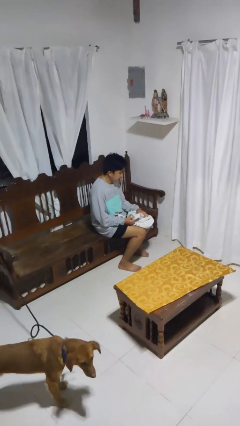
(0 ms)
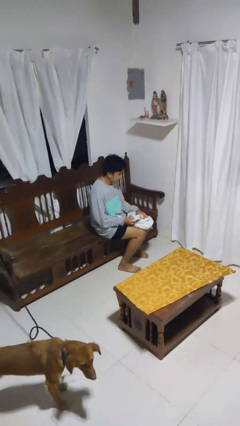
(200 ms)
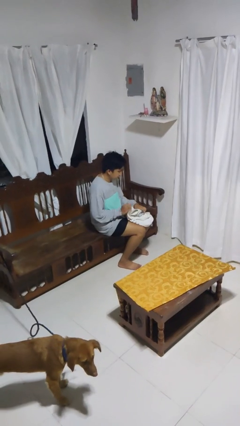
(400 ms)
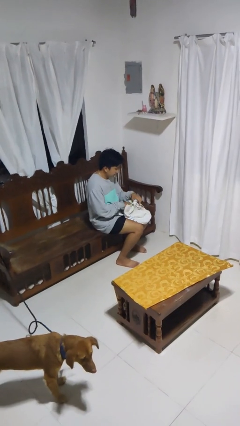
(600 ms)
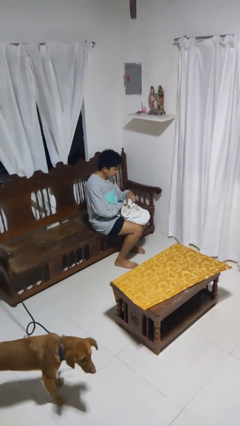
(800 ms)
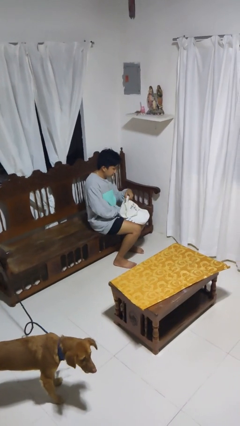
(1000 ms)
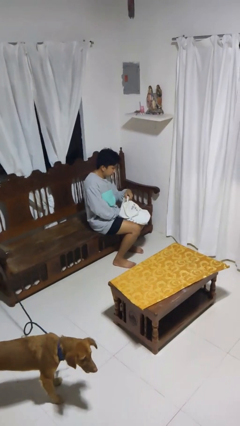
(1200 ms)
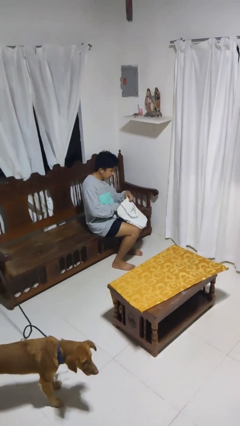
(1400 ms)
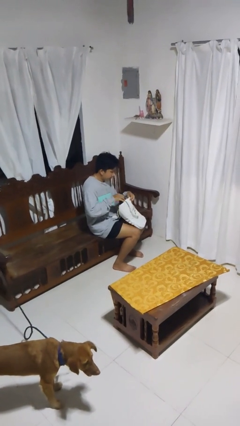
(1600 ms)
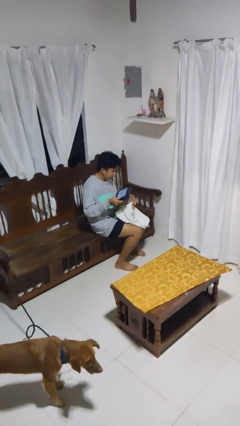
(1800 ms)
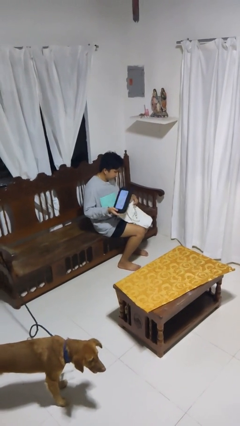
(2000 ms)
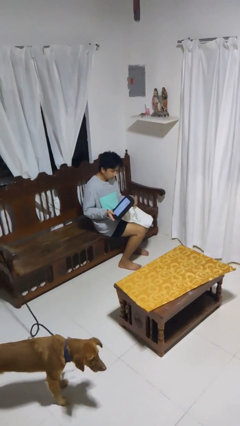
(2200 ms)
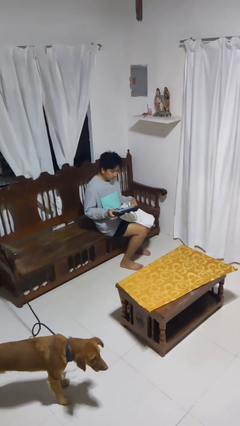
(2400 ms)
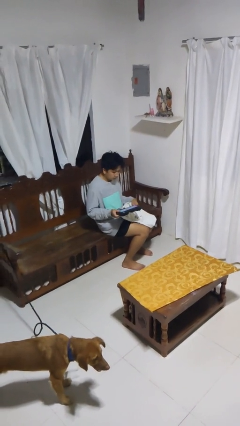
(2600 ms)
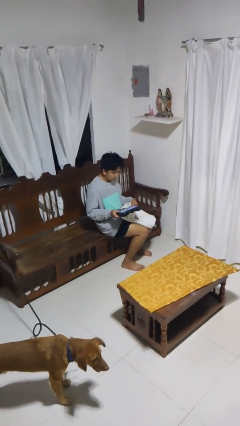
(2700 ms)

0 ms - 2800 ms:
person takes object from bag

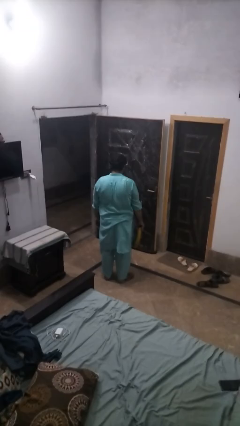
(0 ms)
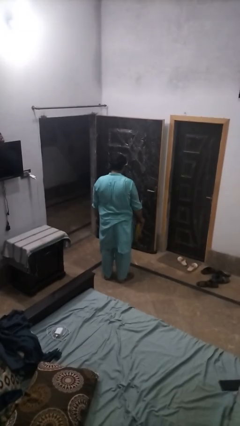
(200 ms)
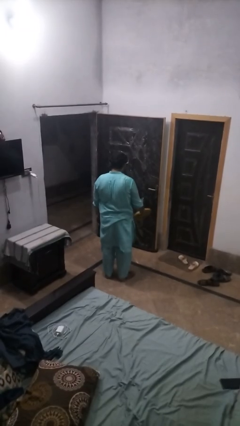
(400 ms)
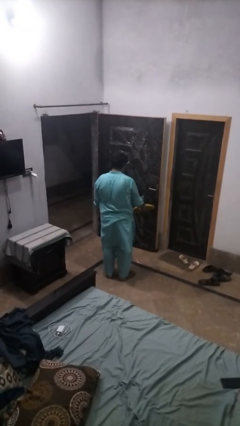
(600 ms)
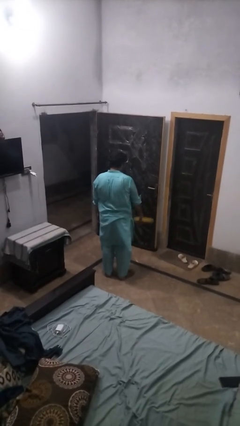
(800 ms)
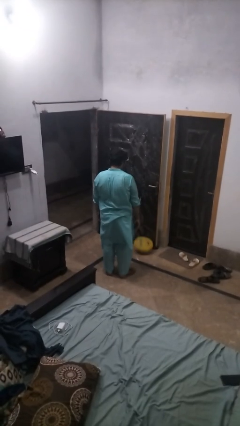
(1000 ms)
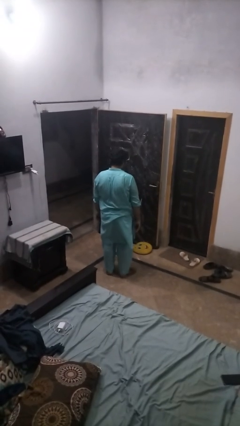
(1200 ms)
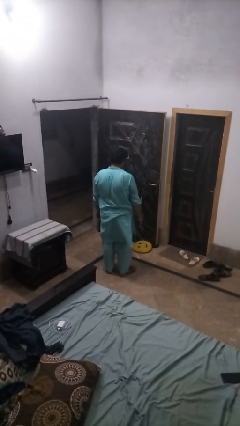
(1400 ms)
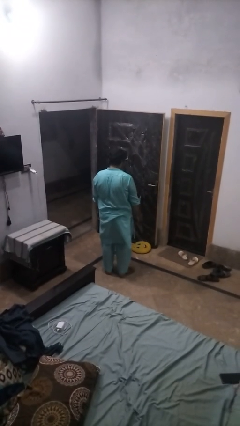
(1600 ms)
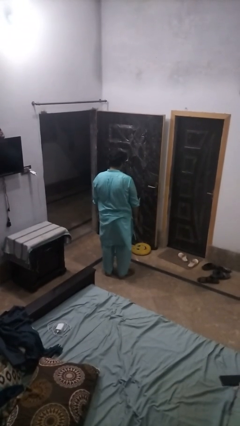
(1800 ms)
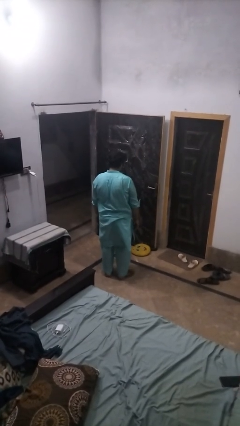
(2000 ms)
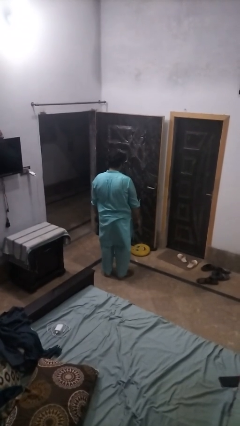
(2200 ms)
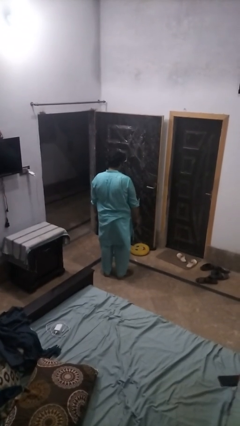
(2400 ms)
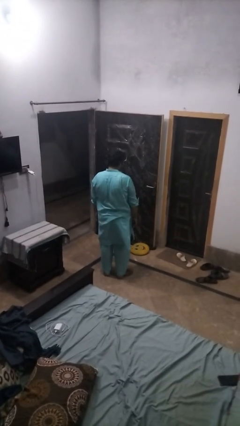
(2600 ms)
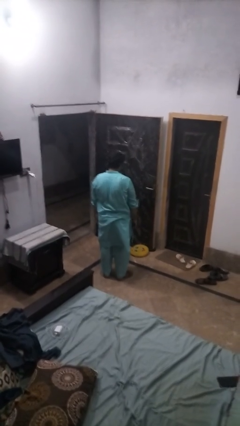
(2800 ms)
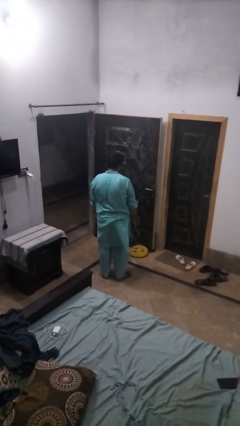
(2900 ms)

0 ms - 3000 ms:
person throws object to ground

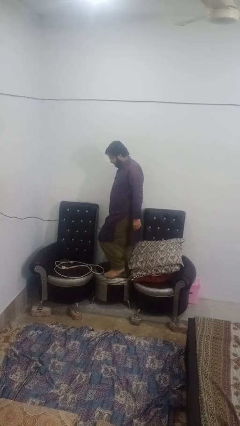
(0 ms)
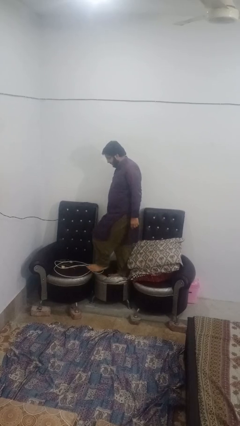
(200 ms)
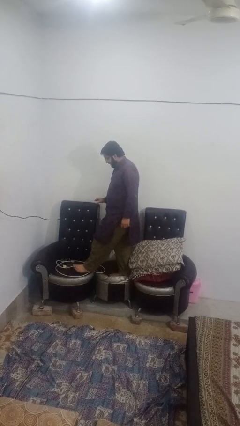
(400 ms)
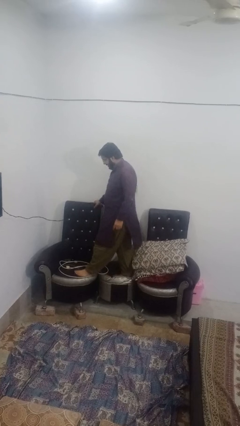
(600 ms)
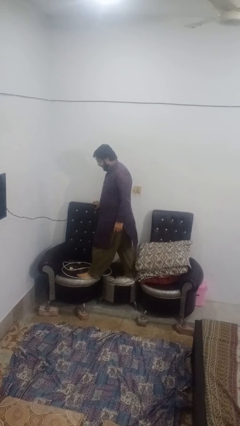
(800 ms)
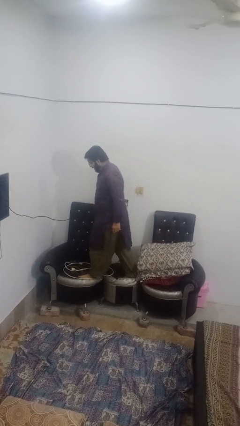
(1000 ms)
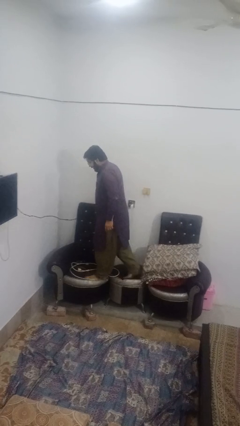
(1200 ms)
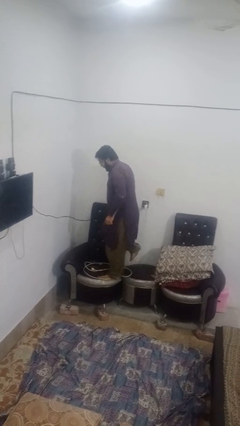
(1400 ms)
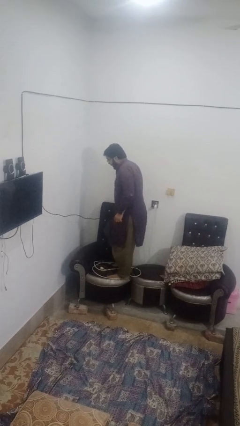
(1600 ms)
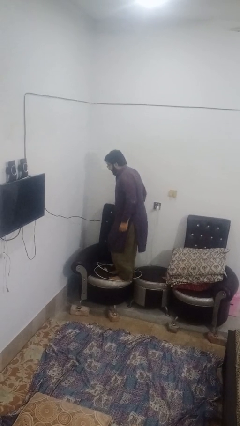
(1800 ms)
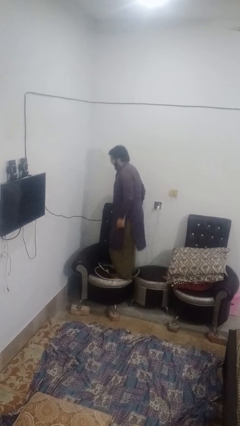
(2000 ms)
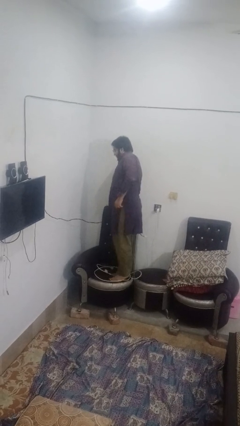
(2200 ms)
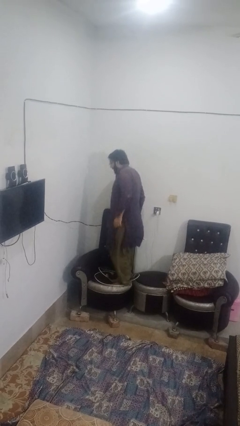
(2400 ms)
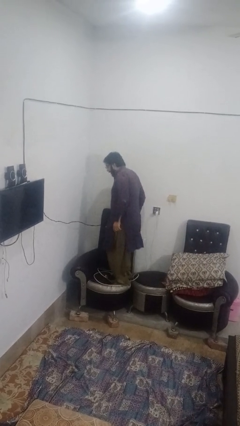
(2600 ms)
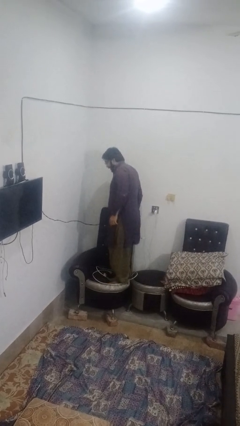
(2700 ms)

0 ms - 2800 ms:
person jumps on couch

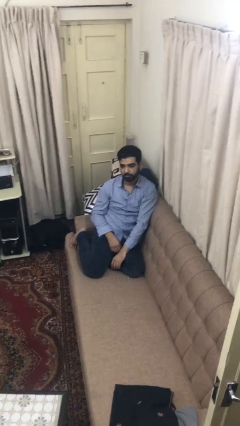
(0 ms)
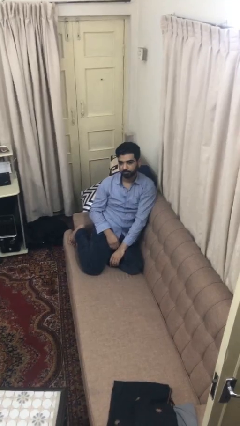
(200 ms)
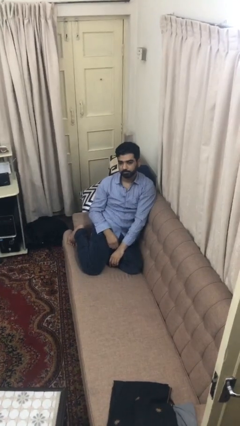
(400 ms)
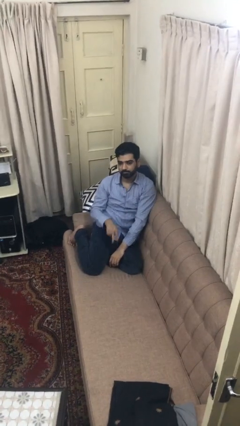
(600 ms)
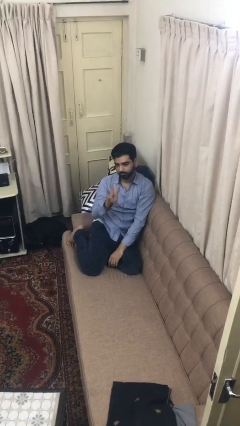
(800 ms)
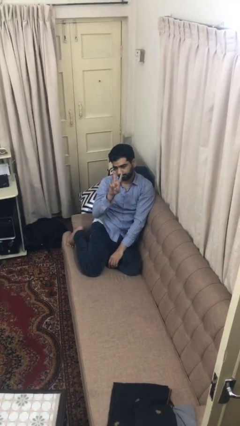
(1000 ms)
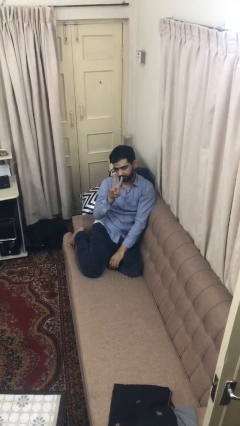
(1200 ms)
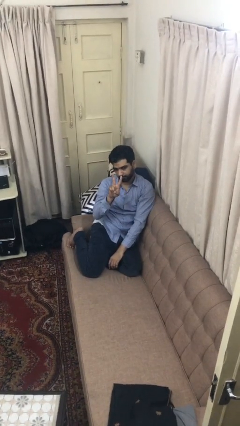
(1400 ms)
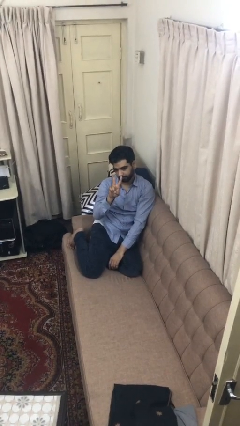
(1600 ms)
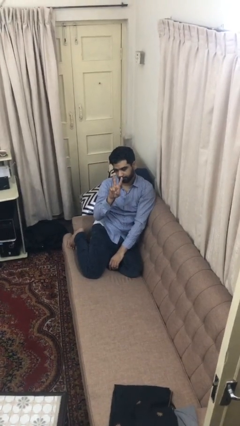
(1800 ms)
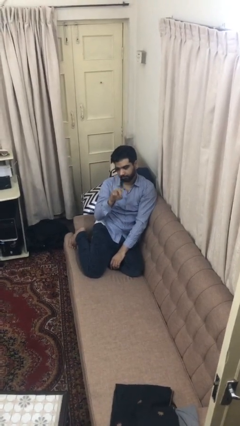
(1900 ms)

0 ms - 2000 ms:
person gestures peace

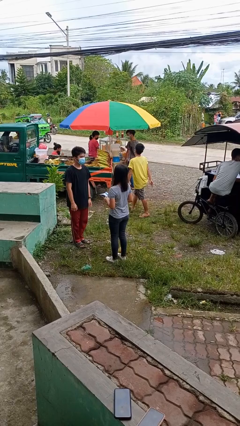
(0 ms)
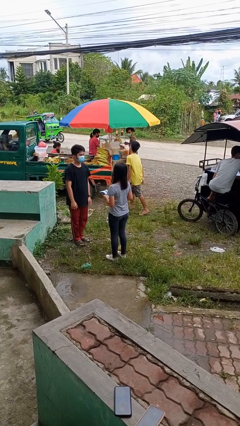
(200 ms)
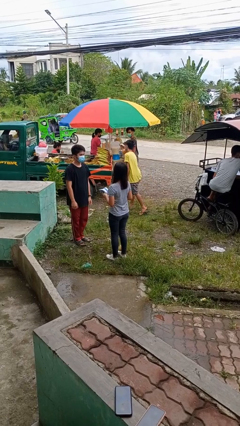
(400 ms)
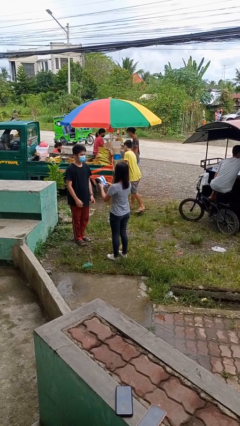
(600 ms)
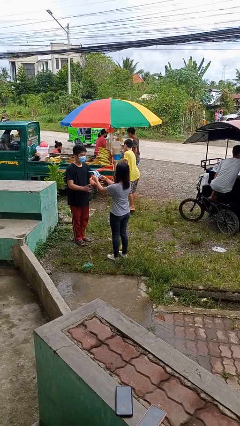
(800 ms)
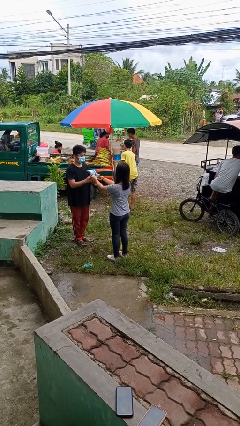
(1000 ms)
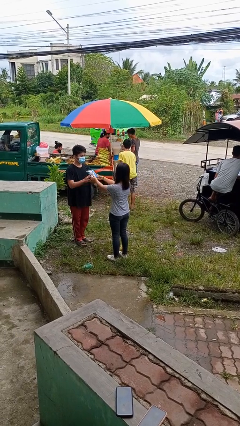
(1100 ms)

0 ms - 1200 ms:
person transfers object to person

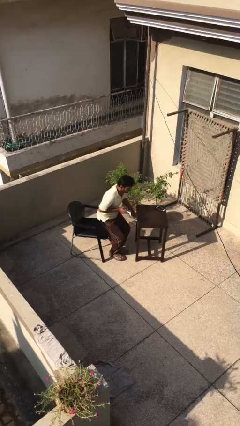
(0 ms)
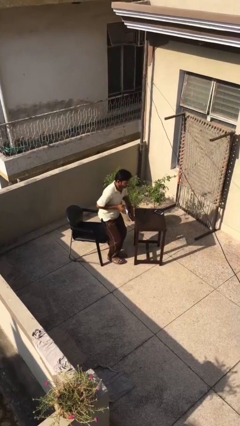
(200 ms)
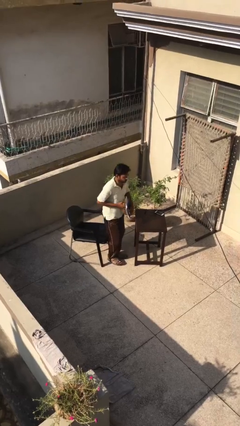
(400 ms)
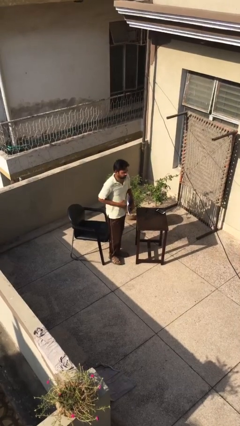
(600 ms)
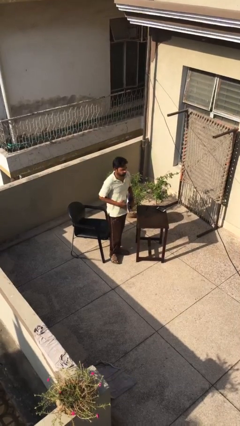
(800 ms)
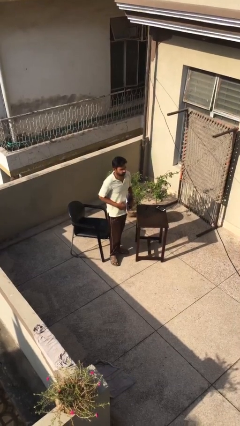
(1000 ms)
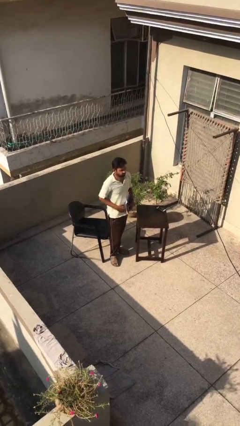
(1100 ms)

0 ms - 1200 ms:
person stands up

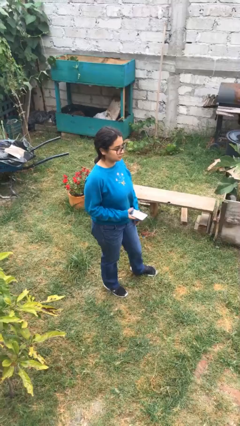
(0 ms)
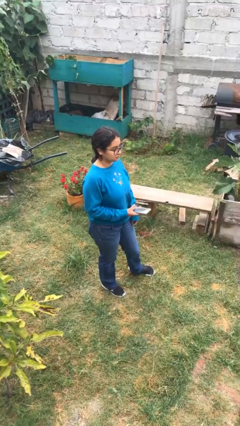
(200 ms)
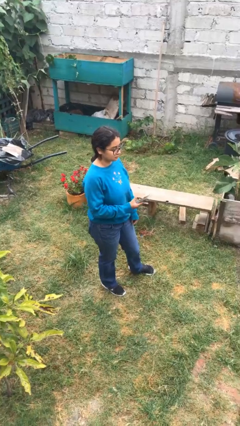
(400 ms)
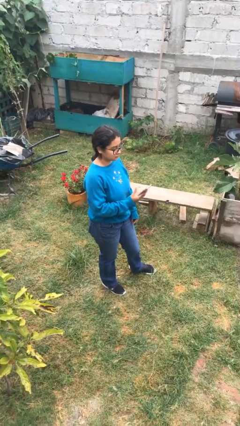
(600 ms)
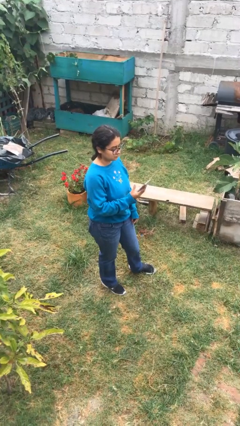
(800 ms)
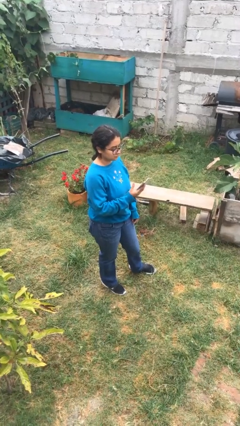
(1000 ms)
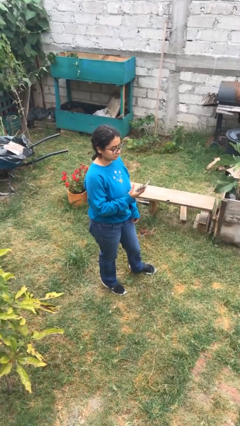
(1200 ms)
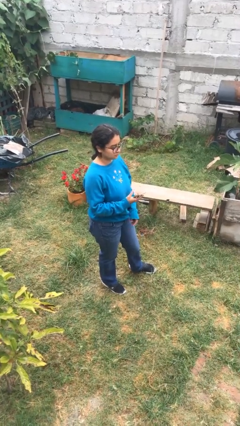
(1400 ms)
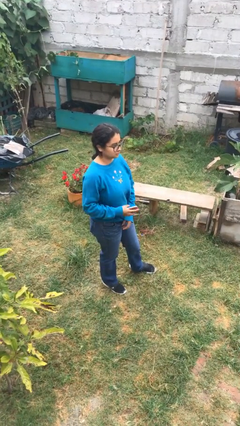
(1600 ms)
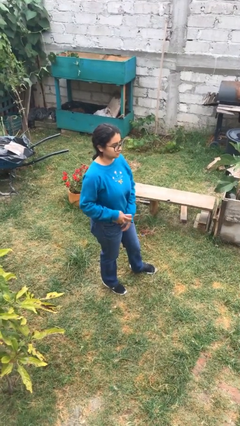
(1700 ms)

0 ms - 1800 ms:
person puts phone into pocket

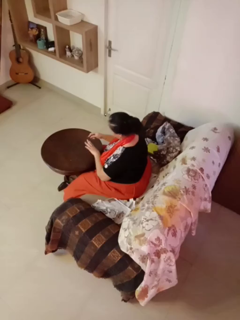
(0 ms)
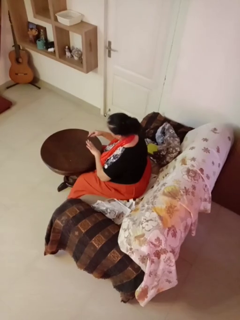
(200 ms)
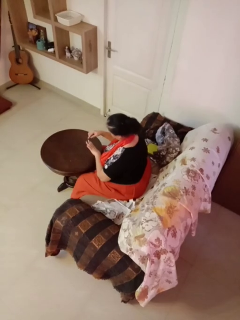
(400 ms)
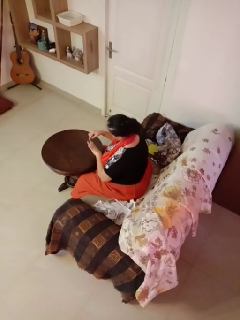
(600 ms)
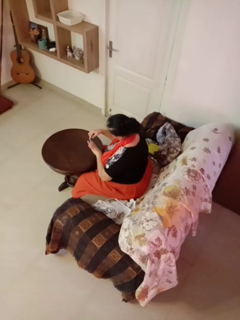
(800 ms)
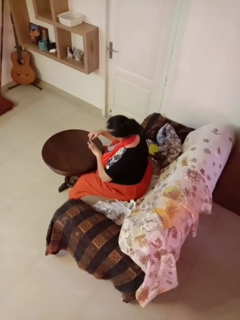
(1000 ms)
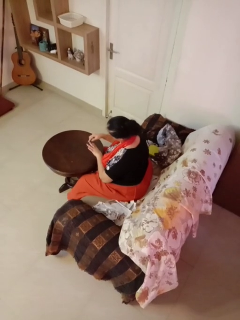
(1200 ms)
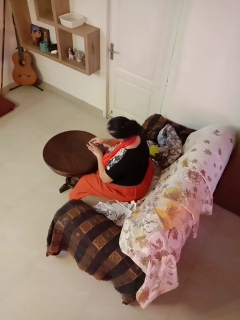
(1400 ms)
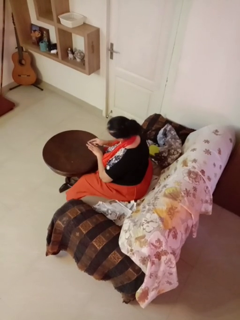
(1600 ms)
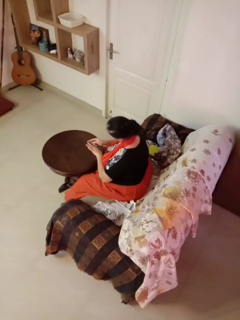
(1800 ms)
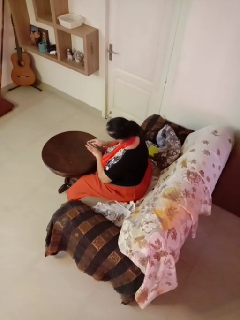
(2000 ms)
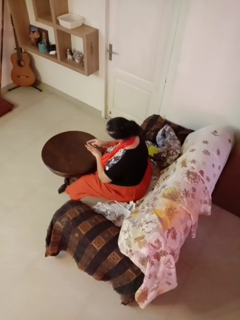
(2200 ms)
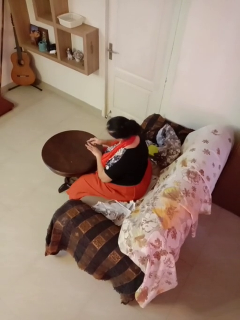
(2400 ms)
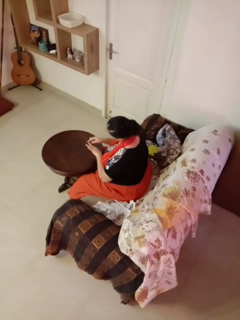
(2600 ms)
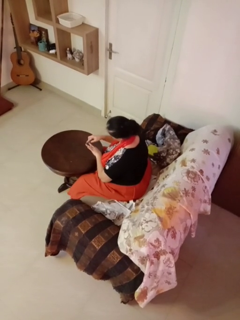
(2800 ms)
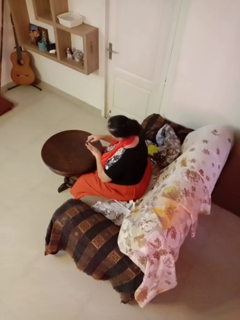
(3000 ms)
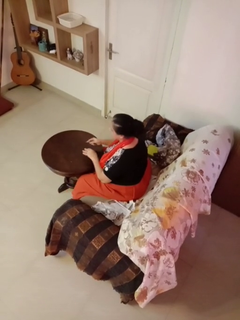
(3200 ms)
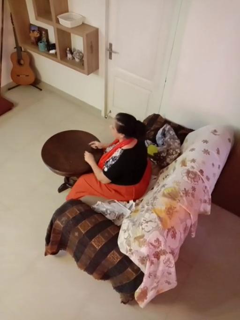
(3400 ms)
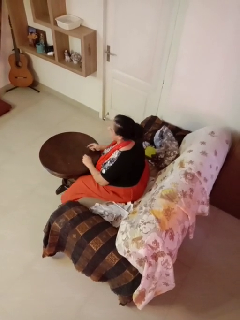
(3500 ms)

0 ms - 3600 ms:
person files fingernails
